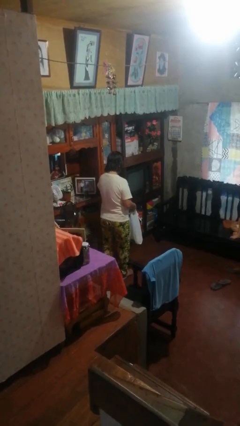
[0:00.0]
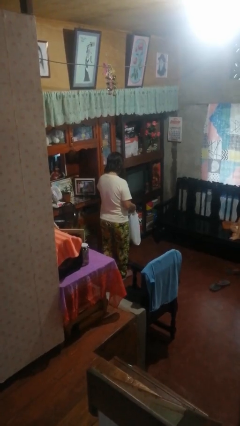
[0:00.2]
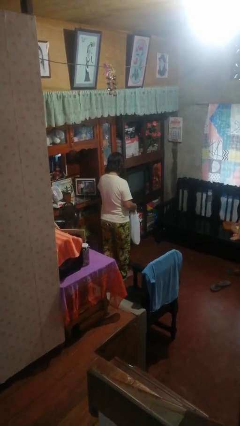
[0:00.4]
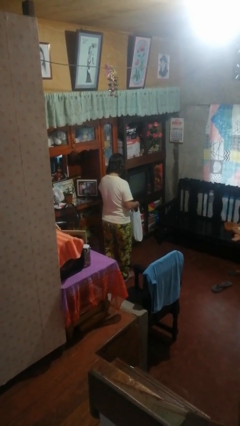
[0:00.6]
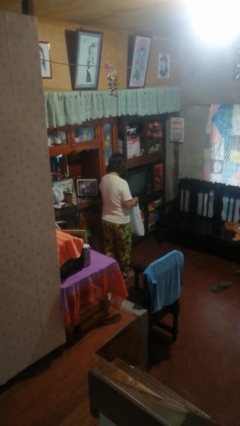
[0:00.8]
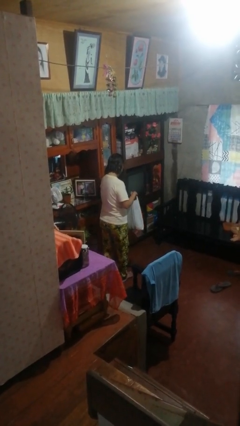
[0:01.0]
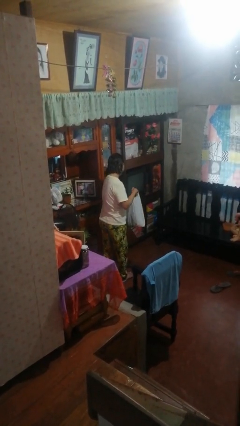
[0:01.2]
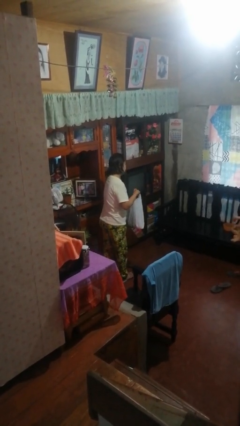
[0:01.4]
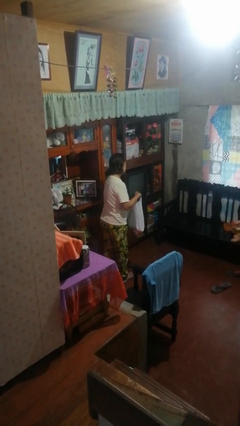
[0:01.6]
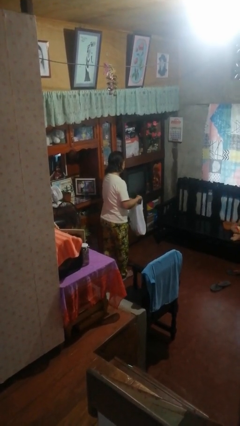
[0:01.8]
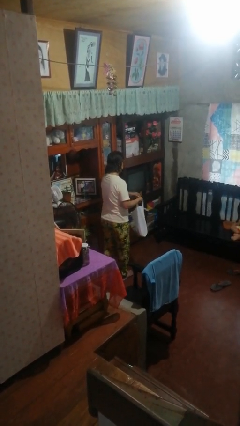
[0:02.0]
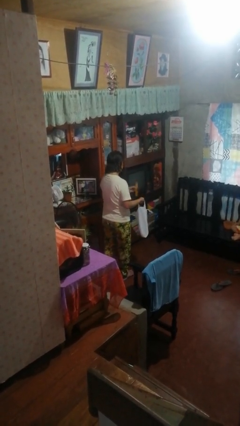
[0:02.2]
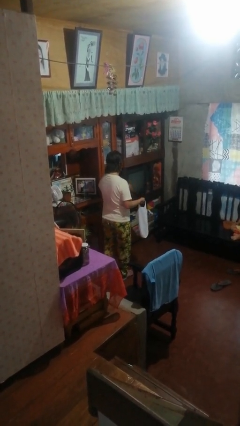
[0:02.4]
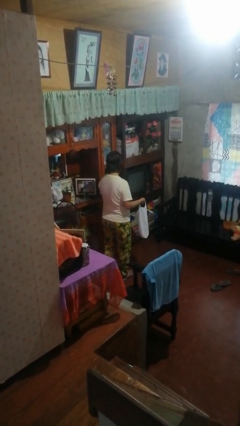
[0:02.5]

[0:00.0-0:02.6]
person takes object from bag

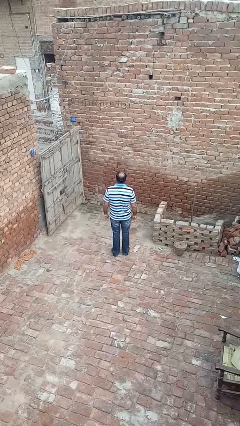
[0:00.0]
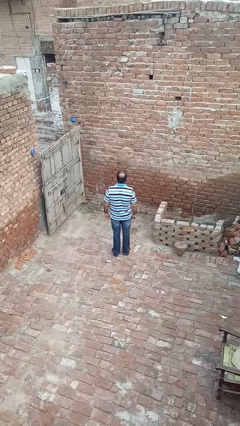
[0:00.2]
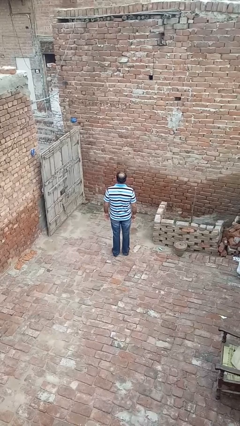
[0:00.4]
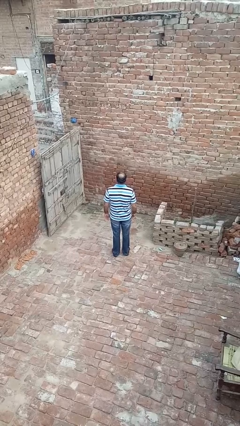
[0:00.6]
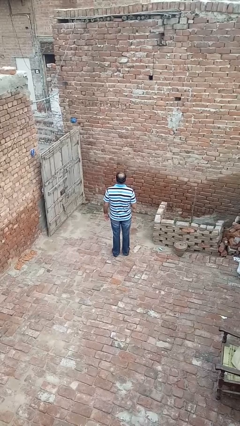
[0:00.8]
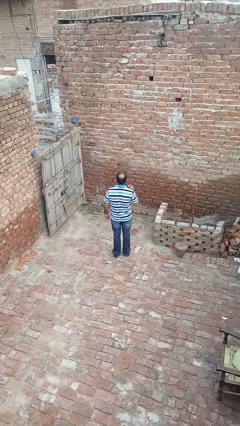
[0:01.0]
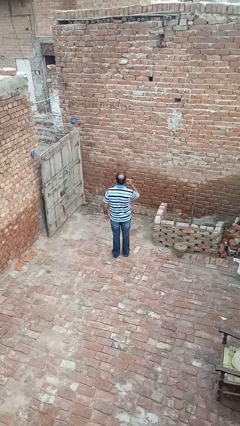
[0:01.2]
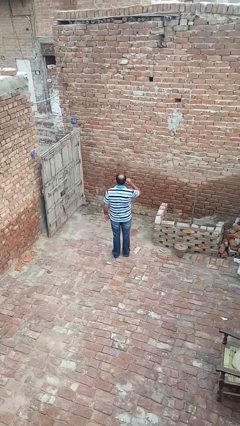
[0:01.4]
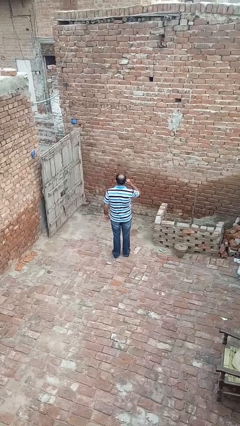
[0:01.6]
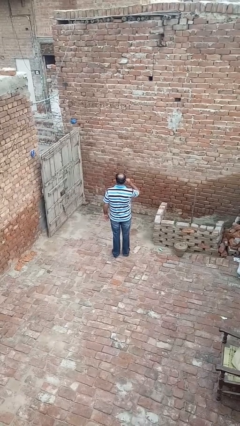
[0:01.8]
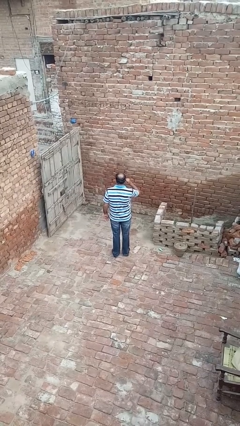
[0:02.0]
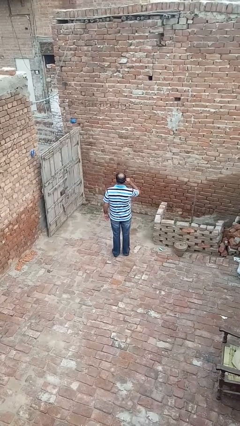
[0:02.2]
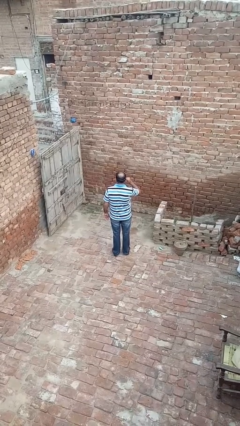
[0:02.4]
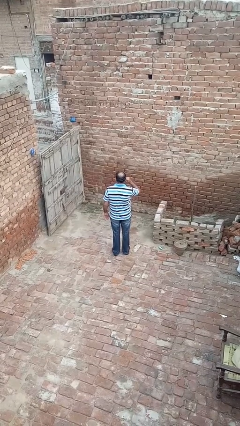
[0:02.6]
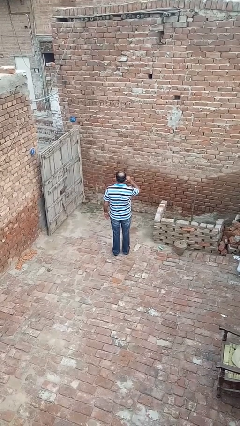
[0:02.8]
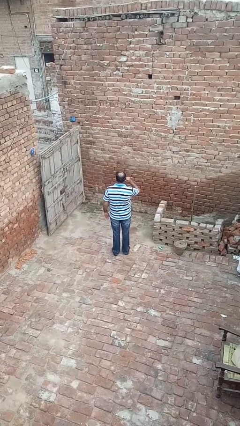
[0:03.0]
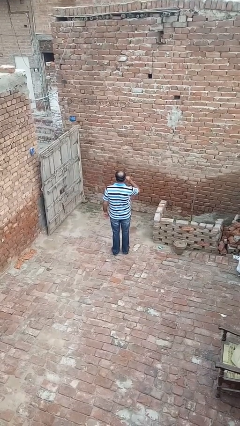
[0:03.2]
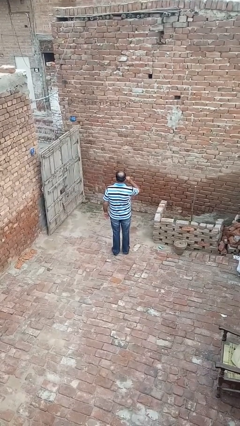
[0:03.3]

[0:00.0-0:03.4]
person touches earlobe

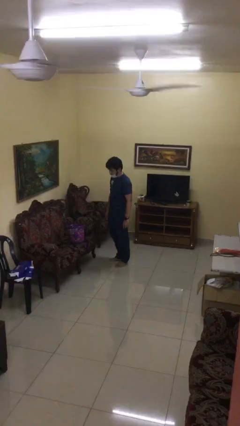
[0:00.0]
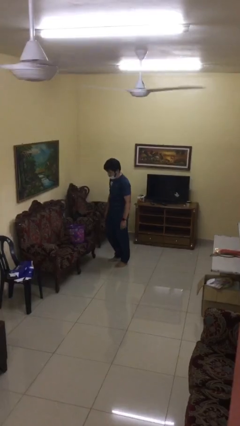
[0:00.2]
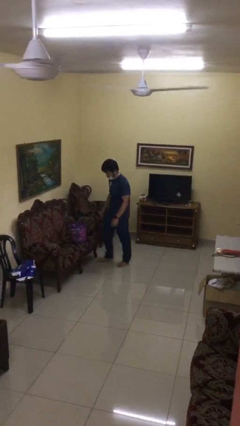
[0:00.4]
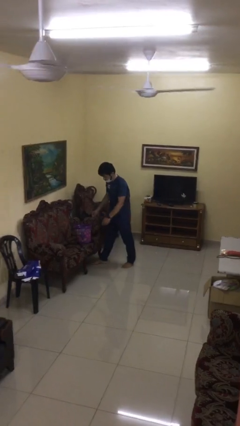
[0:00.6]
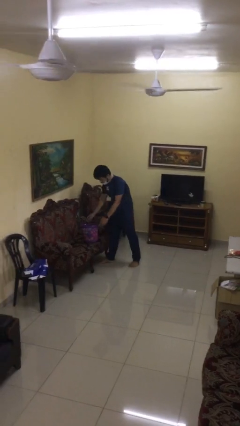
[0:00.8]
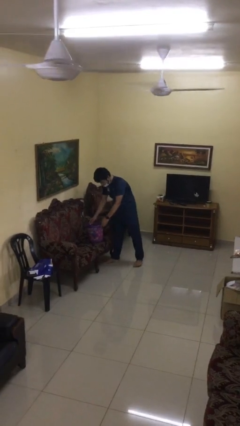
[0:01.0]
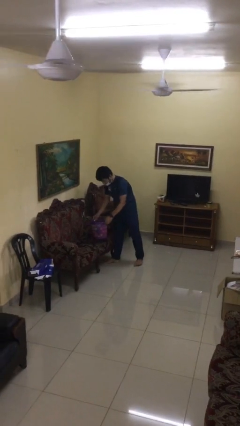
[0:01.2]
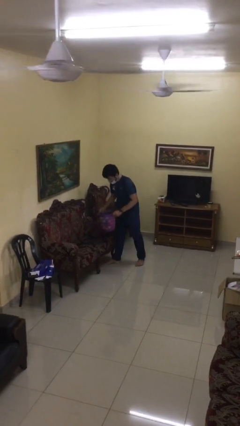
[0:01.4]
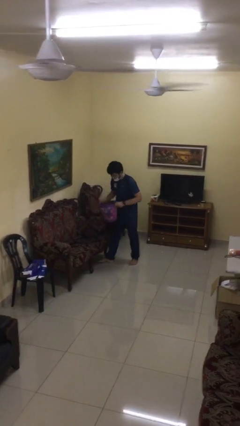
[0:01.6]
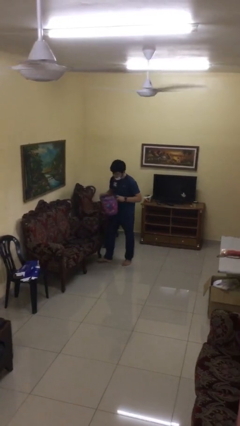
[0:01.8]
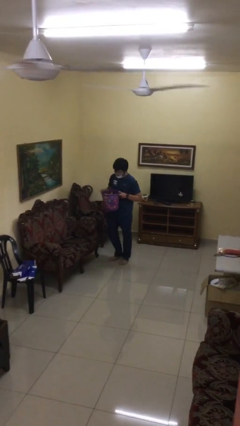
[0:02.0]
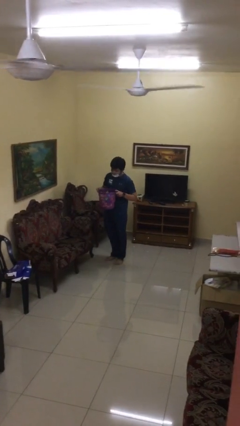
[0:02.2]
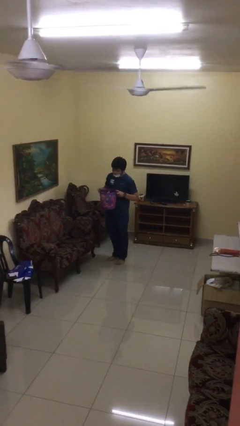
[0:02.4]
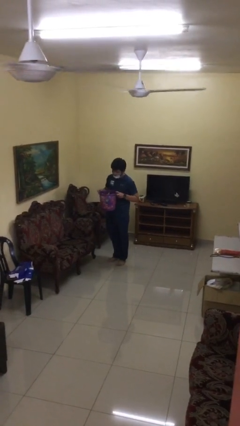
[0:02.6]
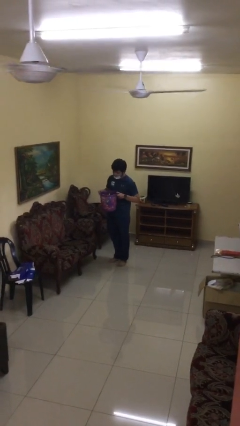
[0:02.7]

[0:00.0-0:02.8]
person picks up object from couch

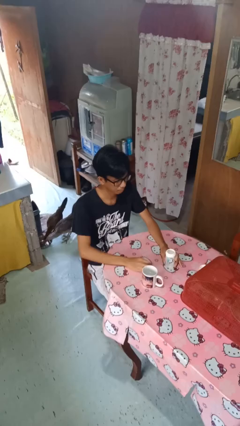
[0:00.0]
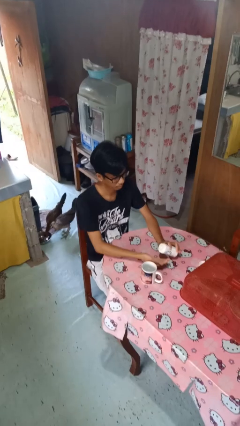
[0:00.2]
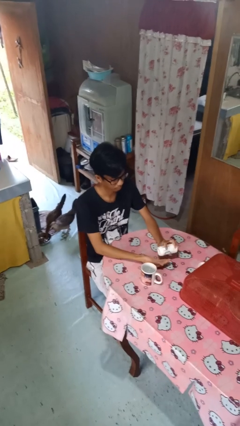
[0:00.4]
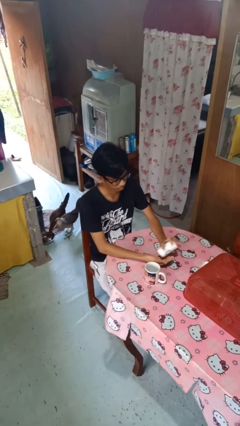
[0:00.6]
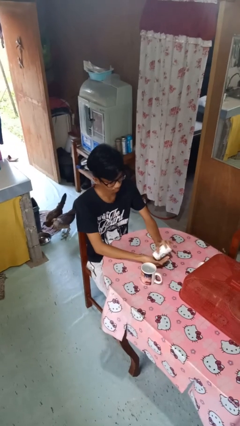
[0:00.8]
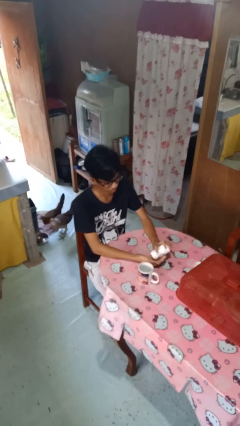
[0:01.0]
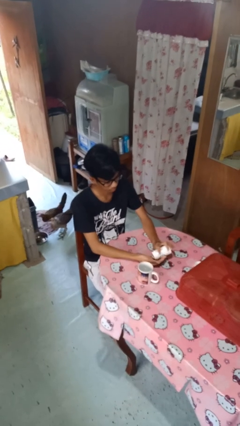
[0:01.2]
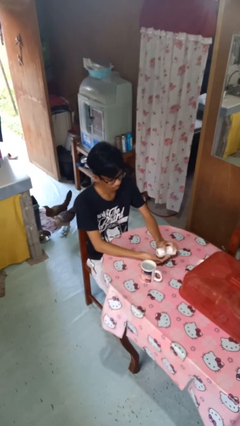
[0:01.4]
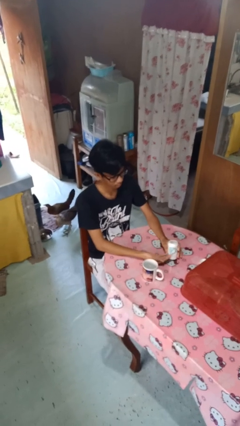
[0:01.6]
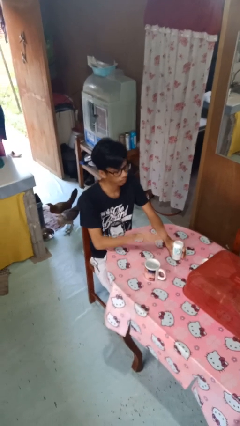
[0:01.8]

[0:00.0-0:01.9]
person takes medicine pills

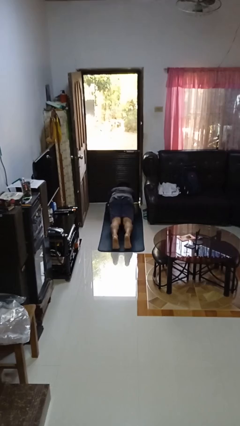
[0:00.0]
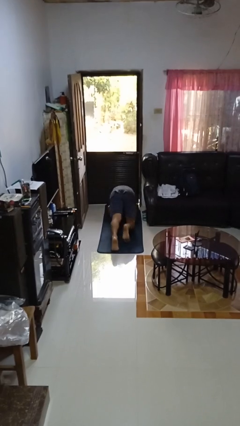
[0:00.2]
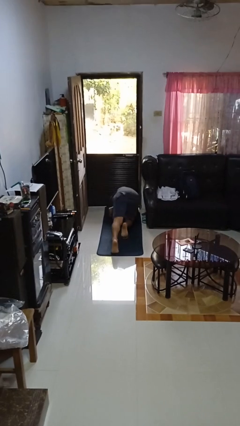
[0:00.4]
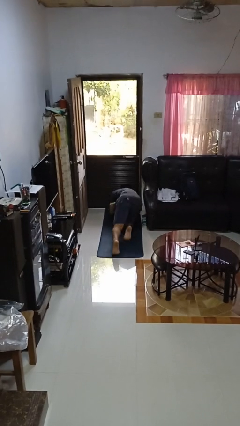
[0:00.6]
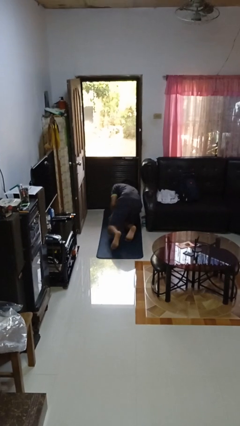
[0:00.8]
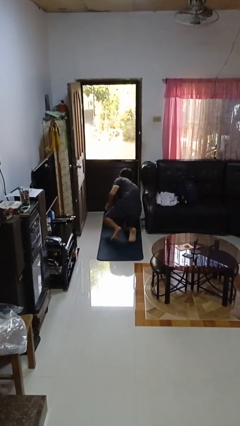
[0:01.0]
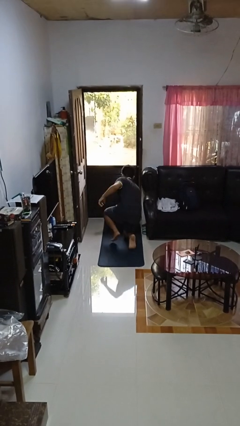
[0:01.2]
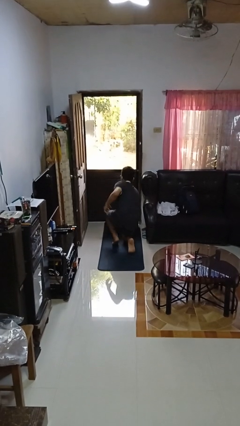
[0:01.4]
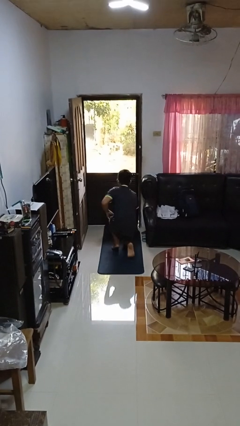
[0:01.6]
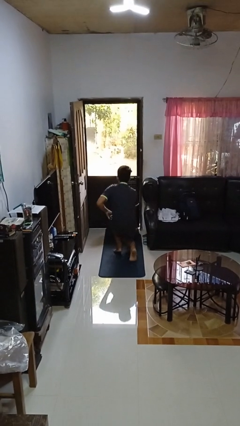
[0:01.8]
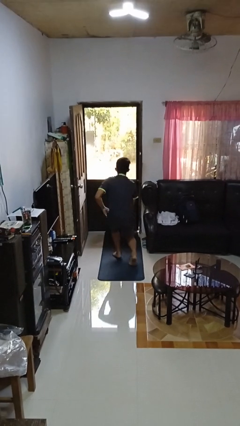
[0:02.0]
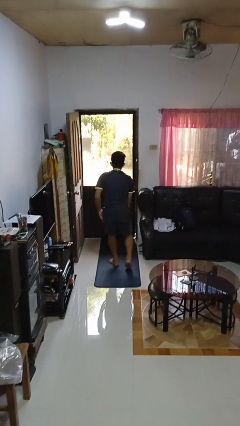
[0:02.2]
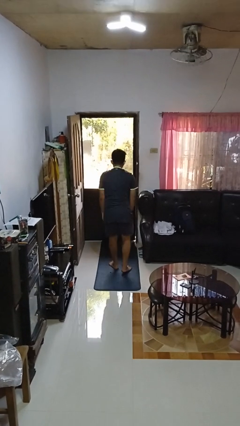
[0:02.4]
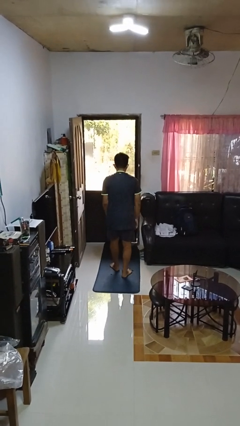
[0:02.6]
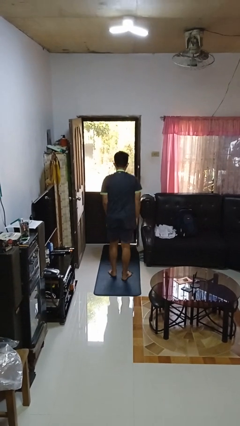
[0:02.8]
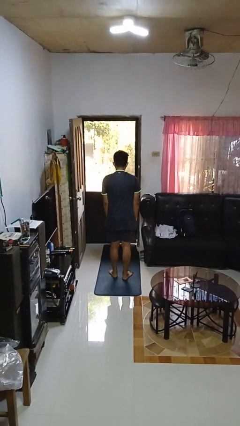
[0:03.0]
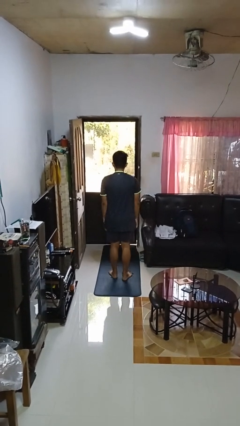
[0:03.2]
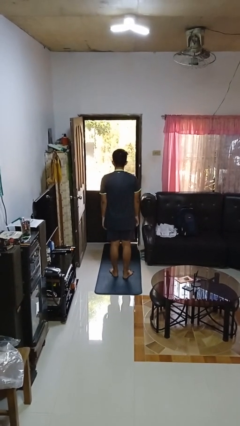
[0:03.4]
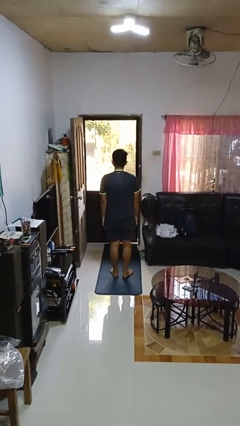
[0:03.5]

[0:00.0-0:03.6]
person stands up from floor

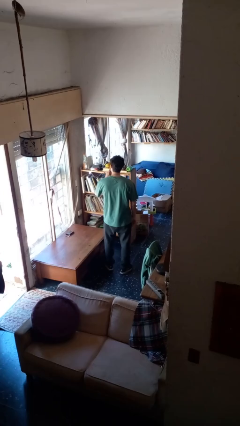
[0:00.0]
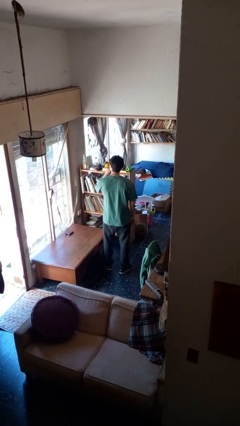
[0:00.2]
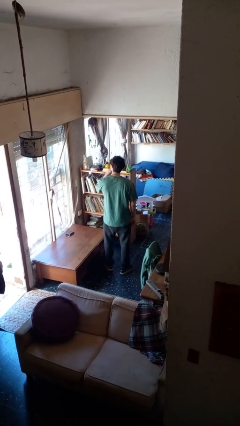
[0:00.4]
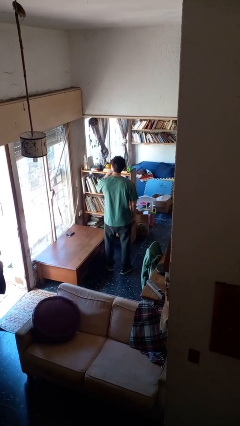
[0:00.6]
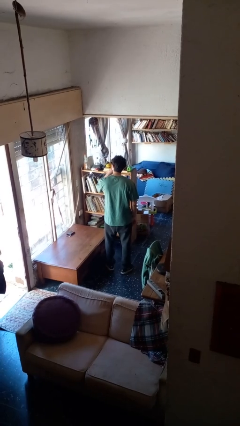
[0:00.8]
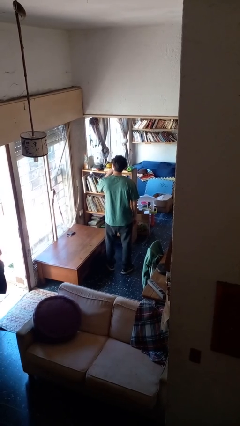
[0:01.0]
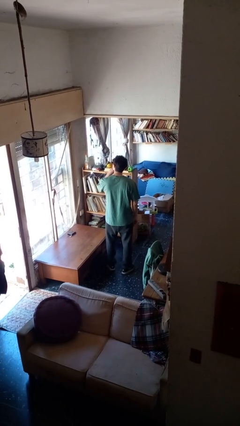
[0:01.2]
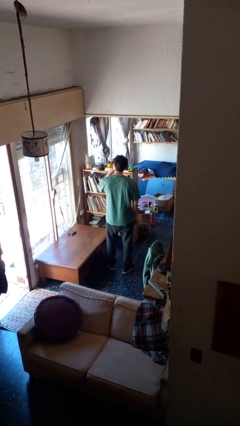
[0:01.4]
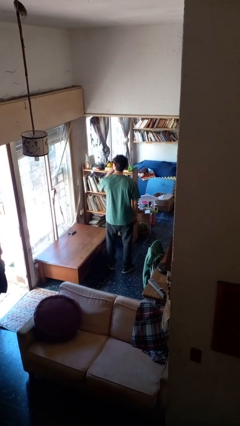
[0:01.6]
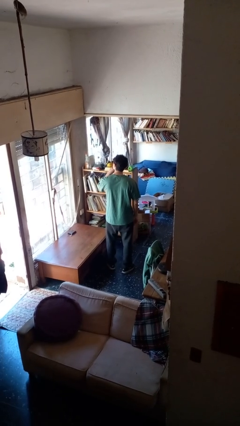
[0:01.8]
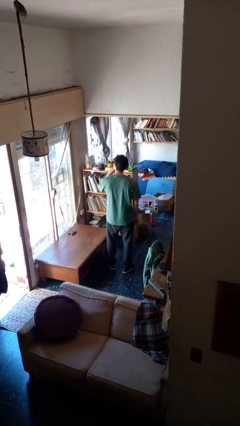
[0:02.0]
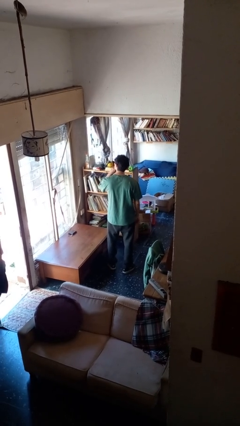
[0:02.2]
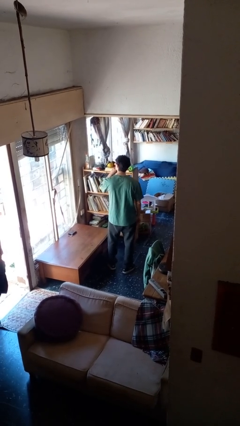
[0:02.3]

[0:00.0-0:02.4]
person gestures be quiet

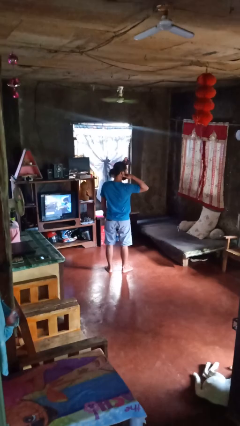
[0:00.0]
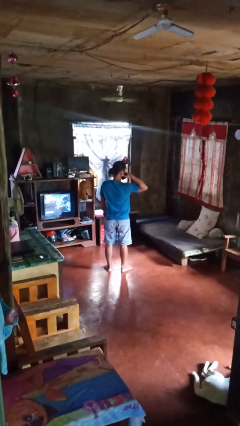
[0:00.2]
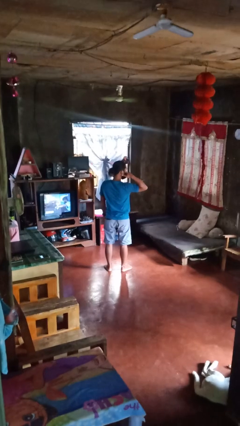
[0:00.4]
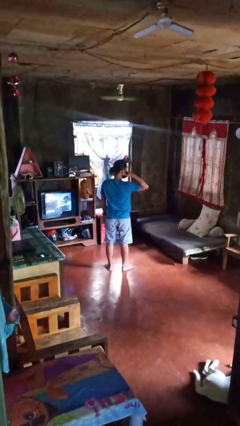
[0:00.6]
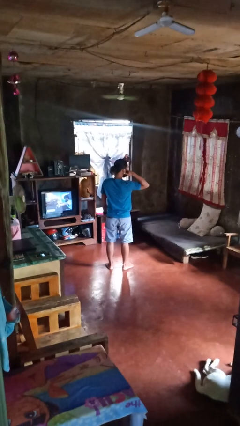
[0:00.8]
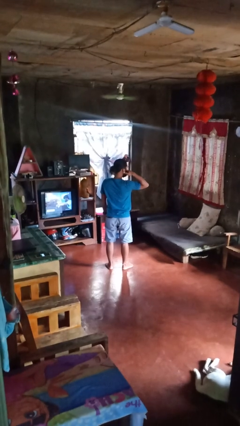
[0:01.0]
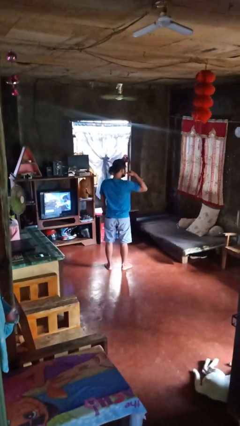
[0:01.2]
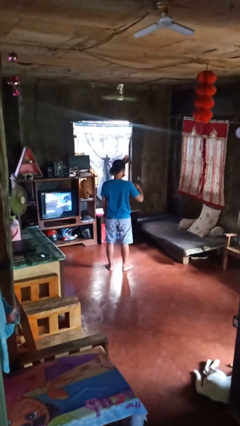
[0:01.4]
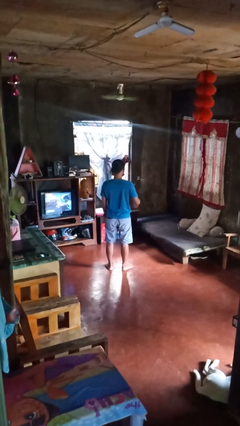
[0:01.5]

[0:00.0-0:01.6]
person gestures call me
